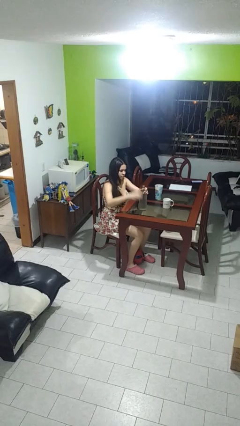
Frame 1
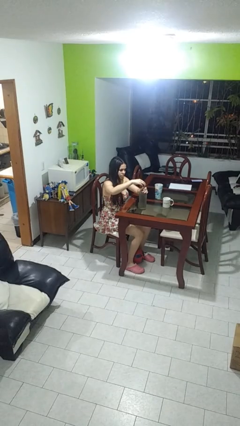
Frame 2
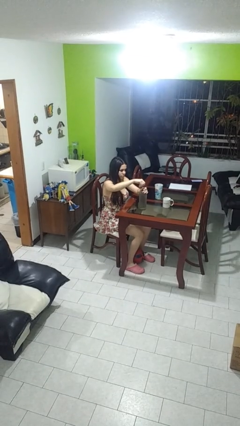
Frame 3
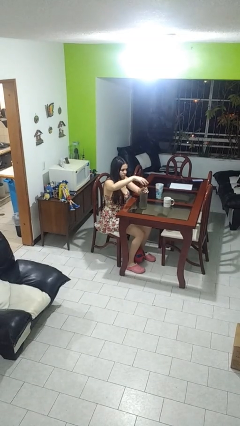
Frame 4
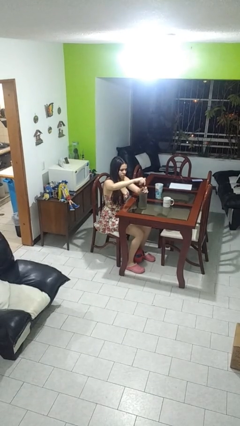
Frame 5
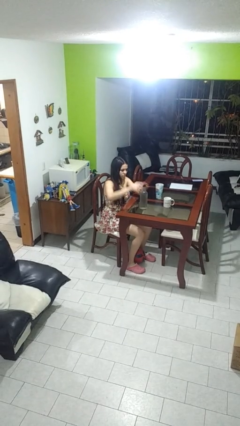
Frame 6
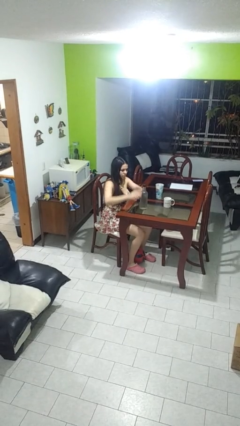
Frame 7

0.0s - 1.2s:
person screws lid to bottle

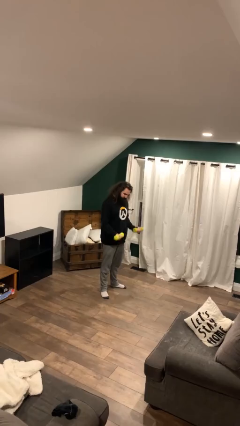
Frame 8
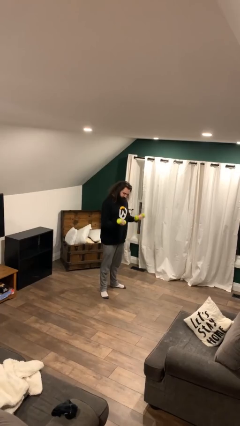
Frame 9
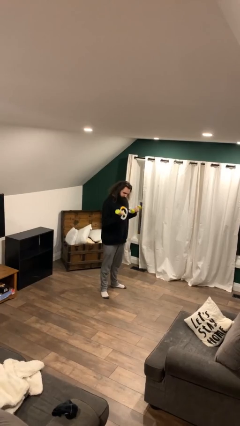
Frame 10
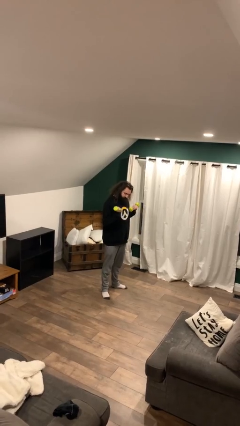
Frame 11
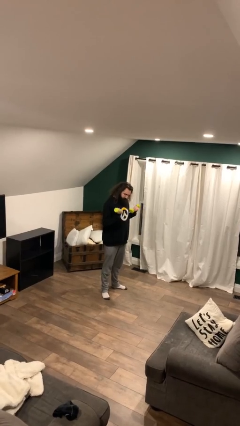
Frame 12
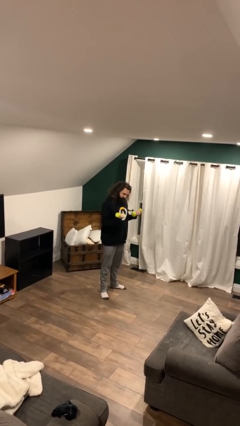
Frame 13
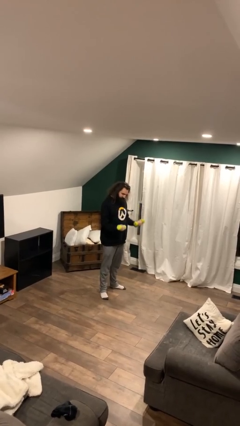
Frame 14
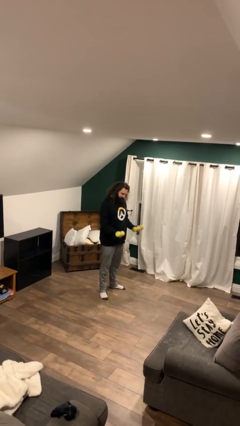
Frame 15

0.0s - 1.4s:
person lifts dumbbells

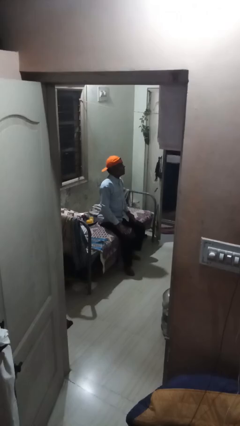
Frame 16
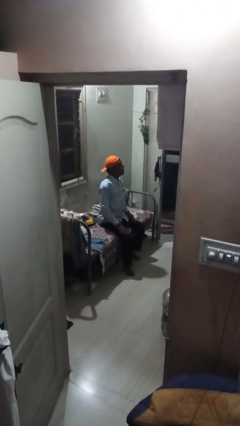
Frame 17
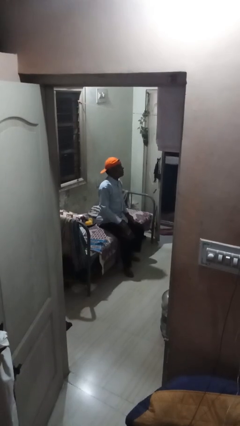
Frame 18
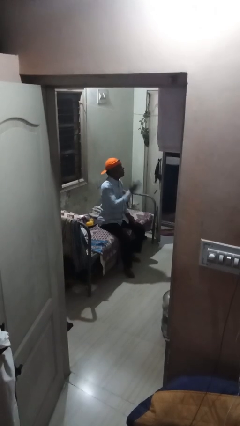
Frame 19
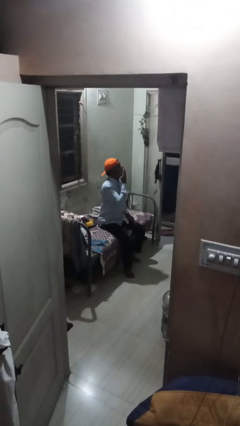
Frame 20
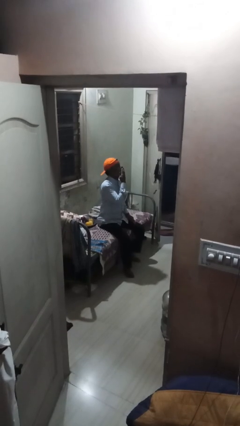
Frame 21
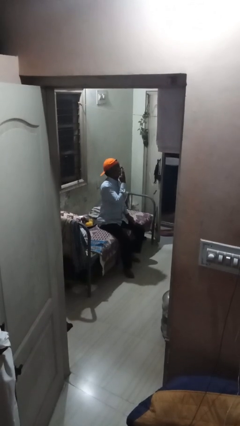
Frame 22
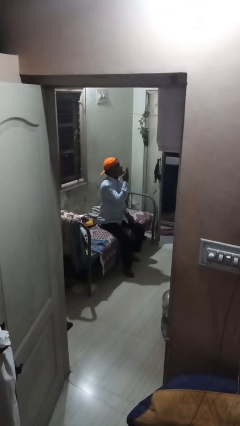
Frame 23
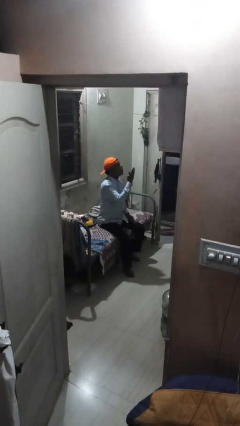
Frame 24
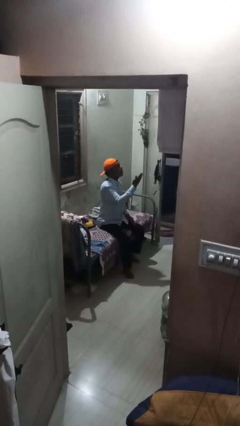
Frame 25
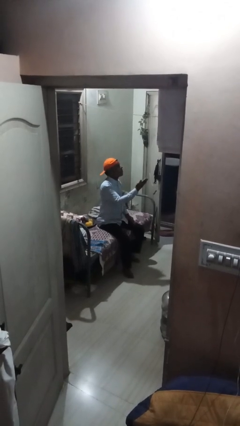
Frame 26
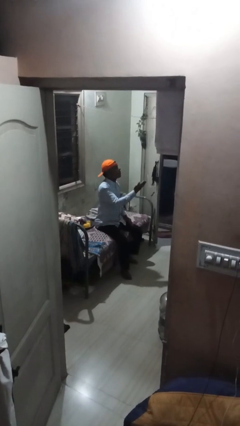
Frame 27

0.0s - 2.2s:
person gestures blow kiss

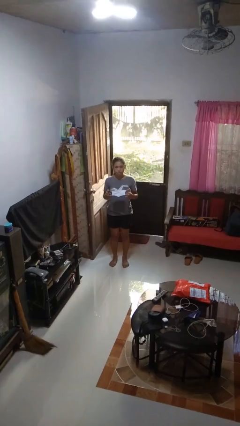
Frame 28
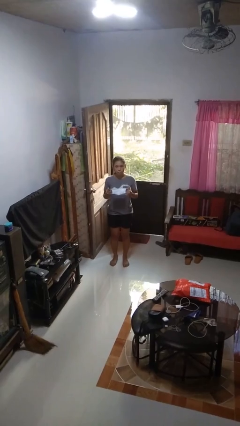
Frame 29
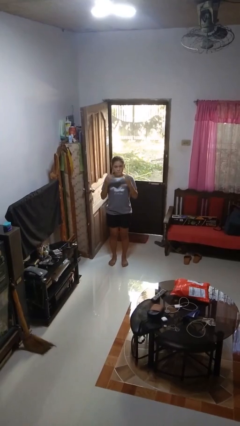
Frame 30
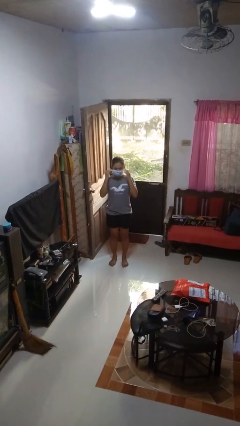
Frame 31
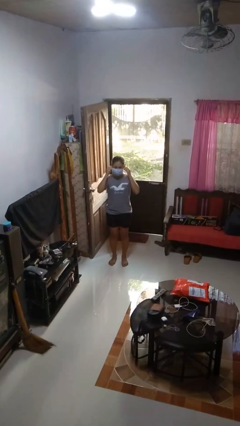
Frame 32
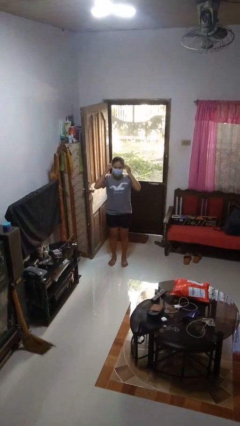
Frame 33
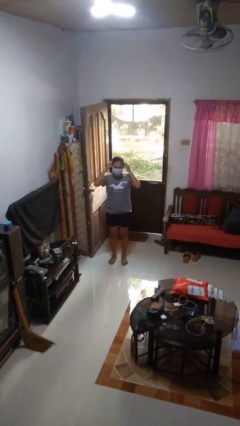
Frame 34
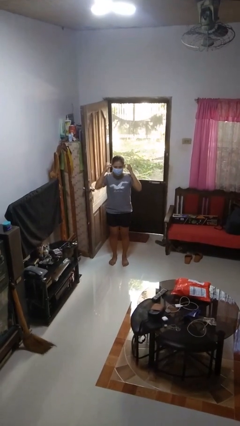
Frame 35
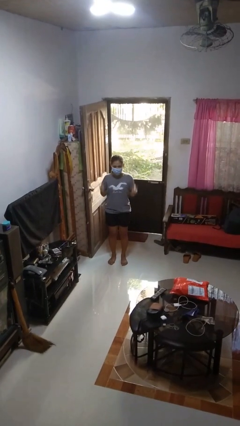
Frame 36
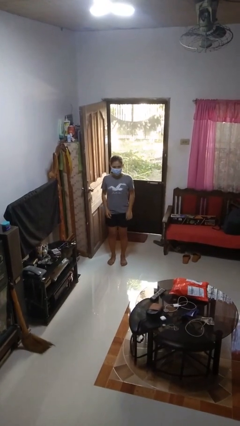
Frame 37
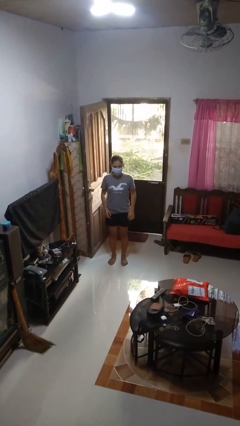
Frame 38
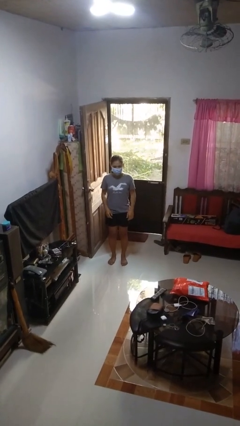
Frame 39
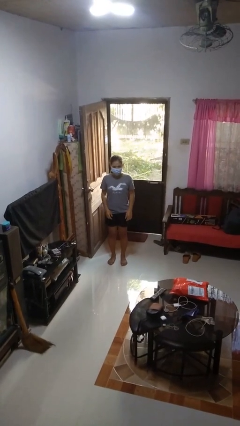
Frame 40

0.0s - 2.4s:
person puts on facemask

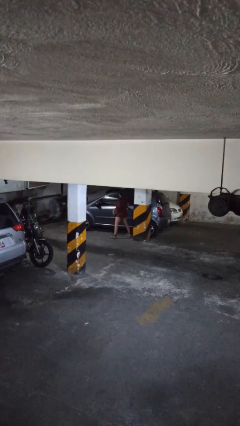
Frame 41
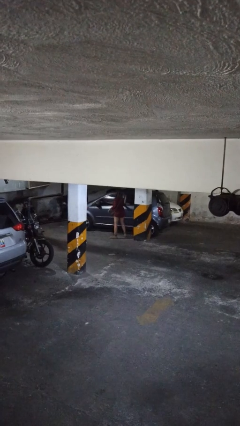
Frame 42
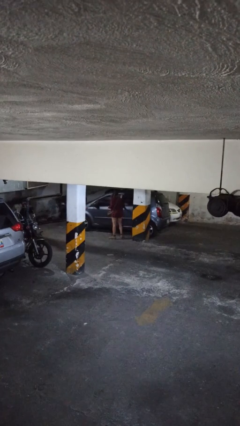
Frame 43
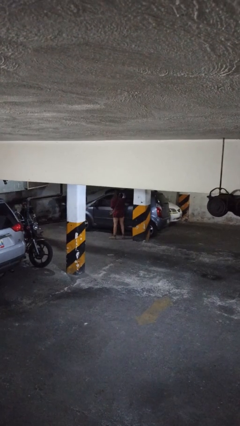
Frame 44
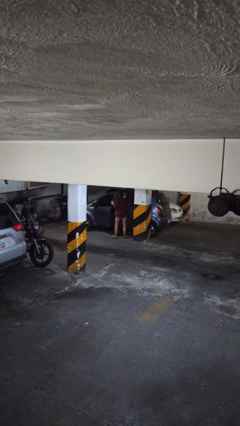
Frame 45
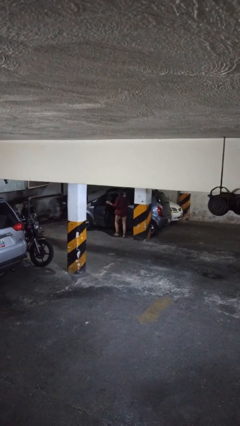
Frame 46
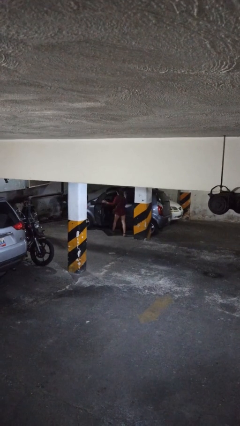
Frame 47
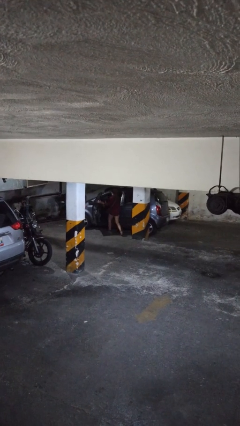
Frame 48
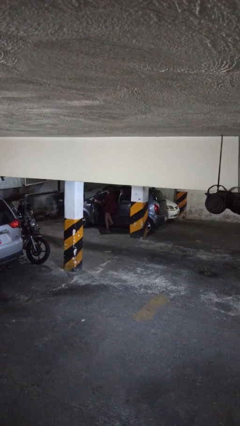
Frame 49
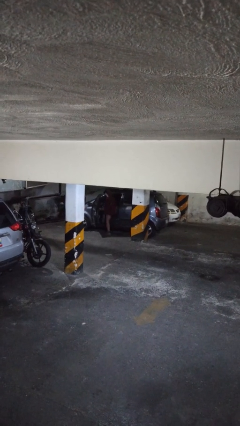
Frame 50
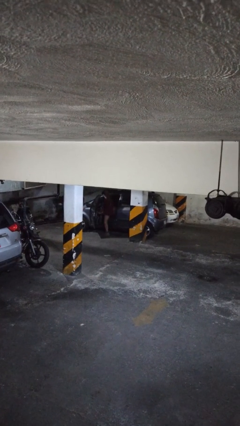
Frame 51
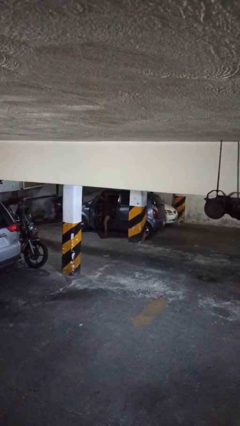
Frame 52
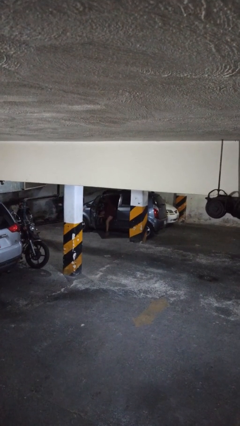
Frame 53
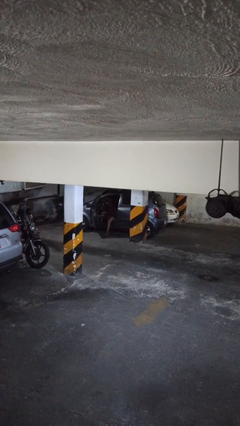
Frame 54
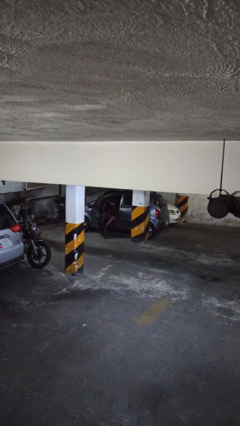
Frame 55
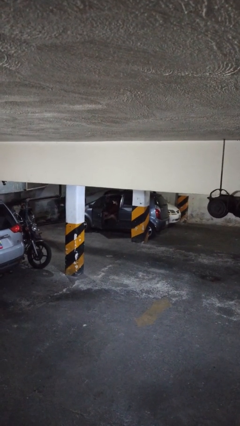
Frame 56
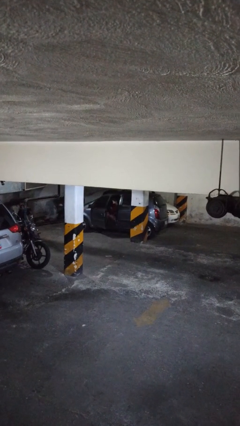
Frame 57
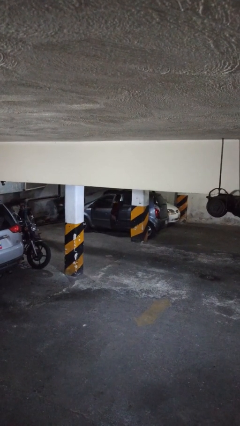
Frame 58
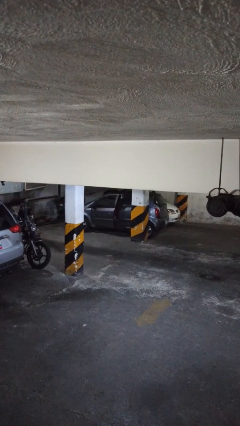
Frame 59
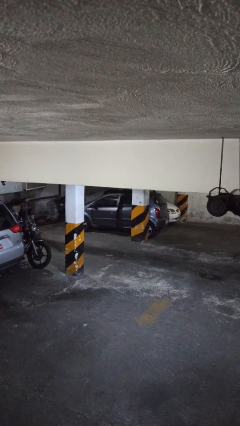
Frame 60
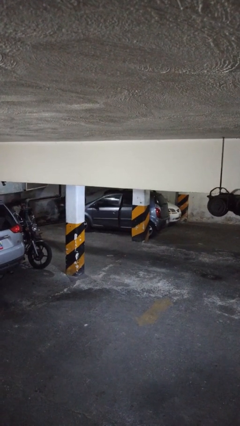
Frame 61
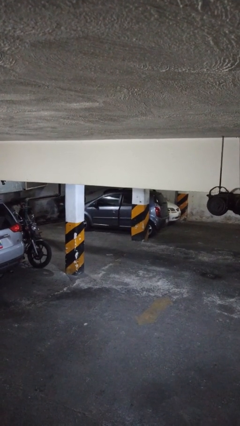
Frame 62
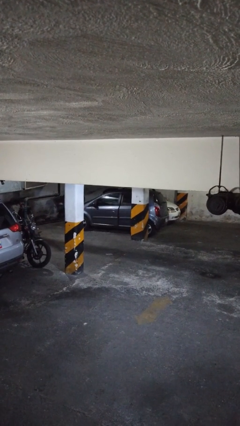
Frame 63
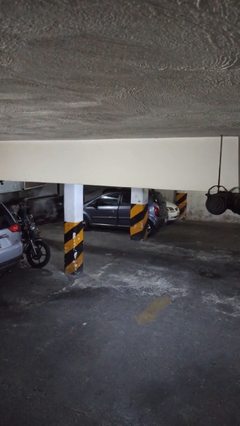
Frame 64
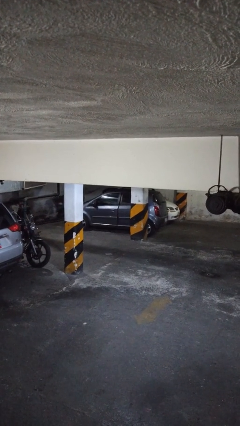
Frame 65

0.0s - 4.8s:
car picks up person

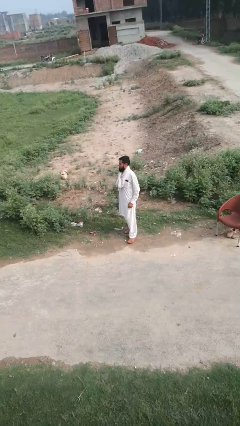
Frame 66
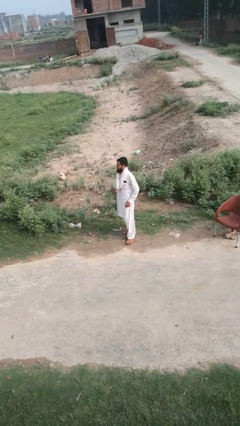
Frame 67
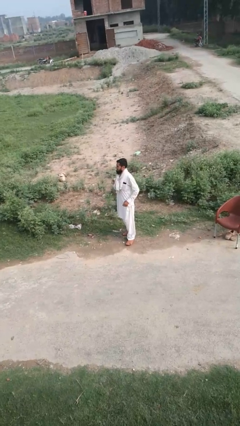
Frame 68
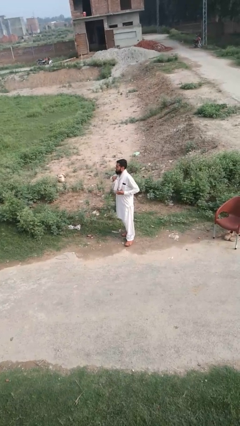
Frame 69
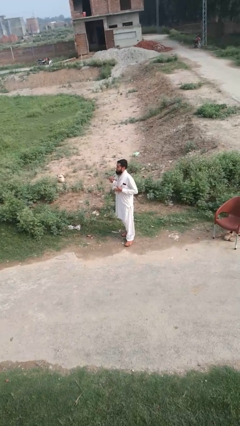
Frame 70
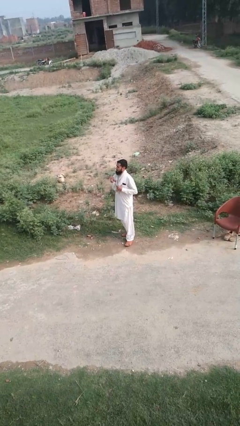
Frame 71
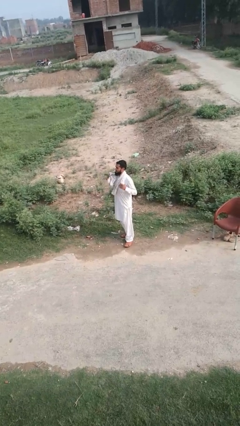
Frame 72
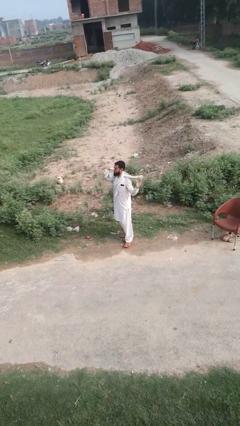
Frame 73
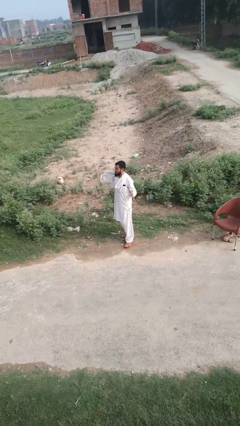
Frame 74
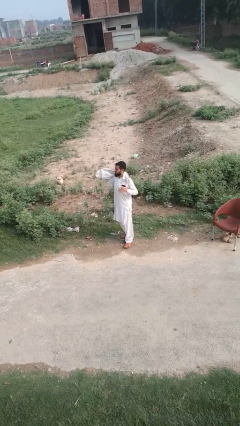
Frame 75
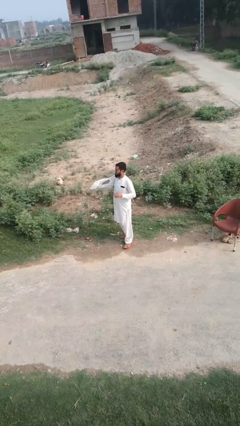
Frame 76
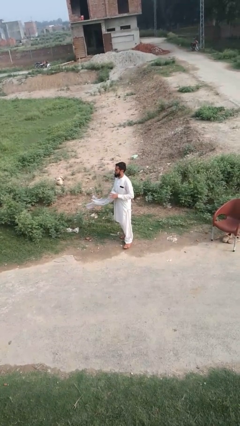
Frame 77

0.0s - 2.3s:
person takes off scarf

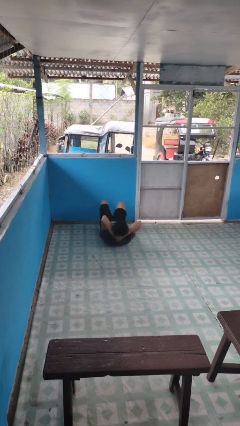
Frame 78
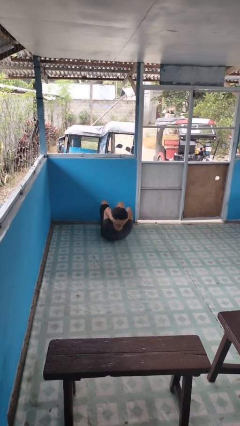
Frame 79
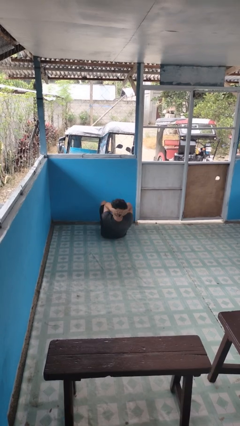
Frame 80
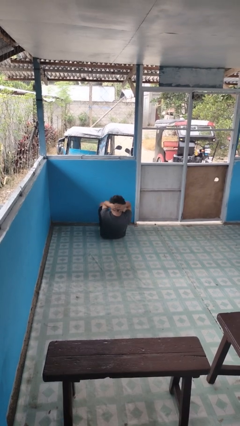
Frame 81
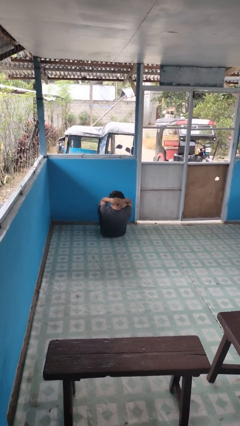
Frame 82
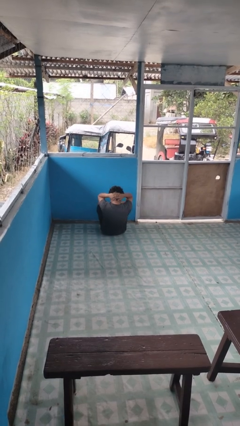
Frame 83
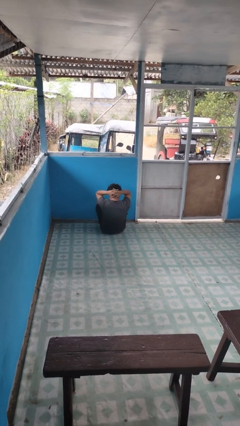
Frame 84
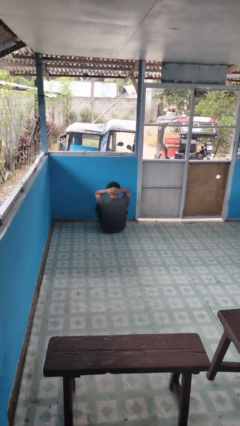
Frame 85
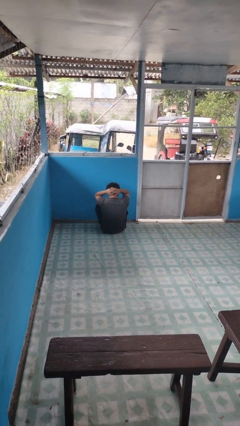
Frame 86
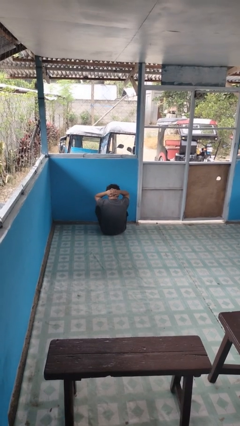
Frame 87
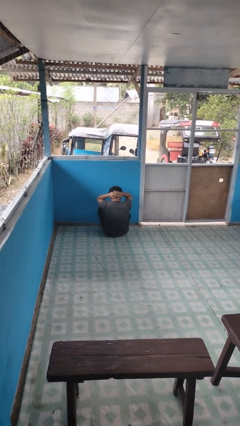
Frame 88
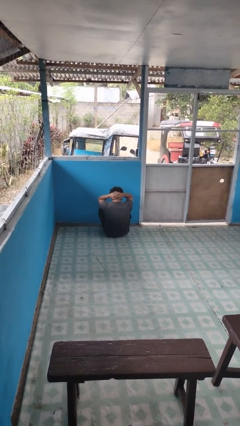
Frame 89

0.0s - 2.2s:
person exercises with situp

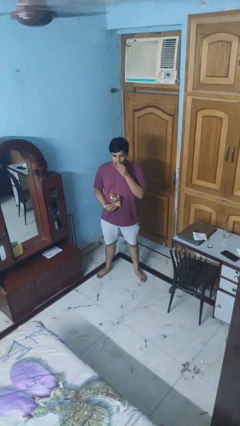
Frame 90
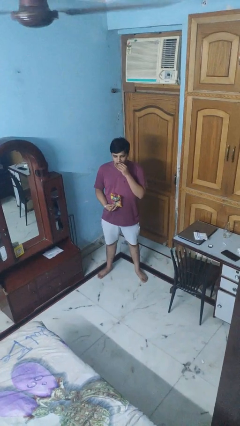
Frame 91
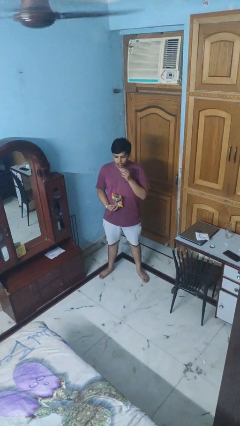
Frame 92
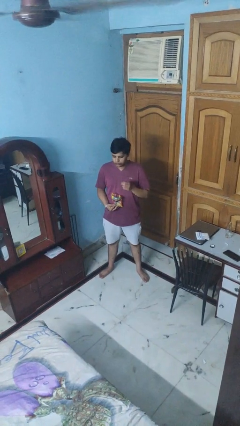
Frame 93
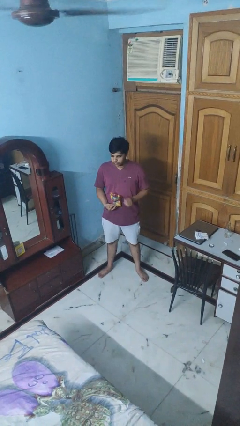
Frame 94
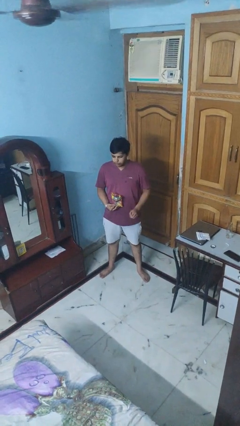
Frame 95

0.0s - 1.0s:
person eats snack from bag
